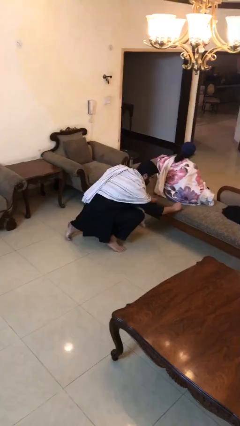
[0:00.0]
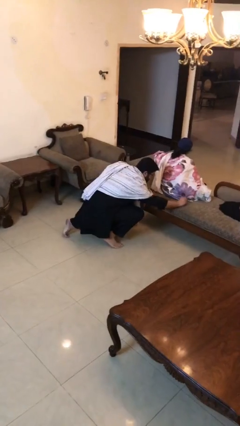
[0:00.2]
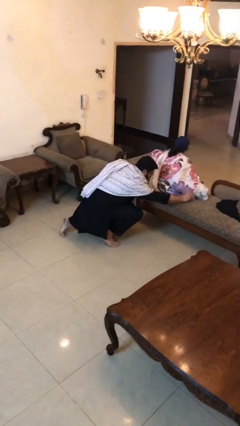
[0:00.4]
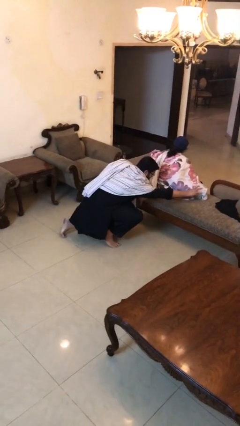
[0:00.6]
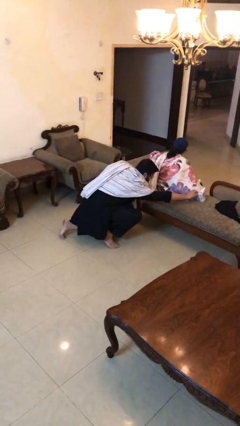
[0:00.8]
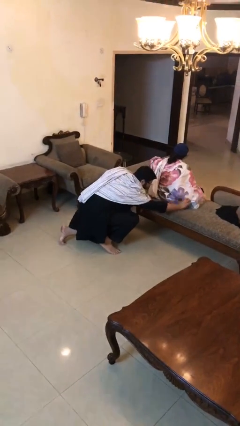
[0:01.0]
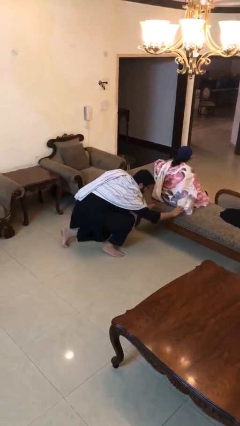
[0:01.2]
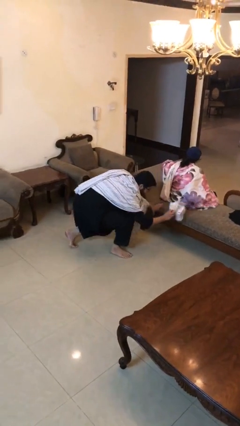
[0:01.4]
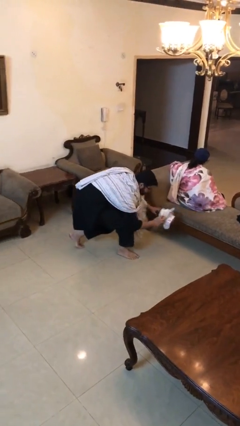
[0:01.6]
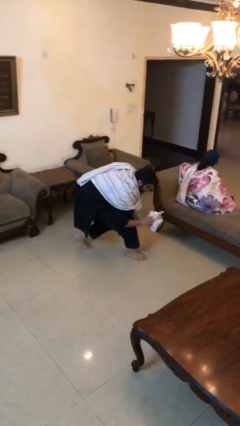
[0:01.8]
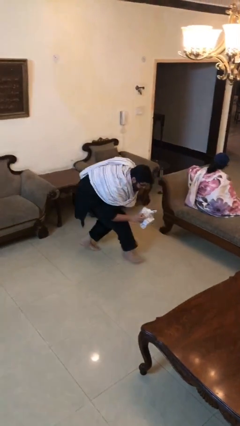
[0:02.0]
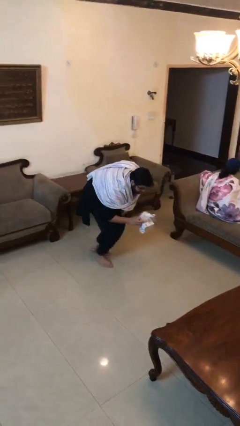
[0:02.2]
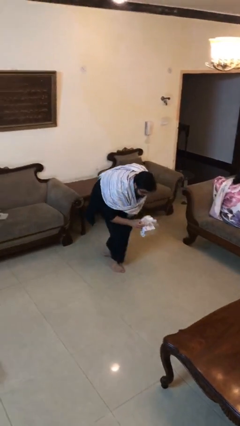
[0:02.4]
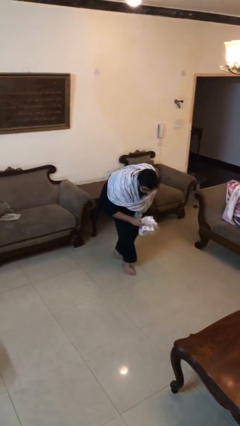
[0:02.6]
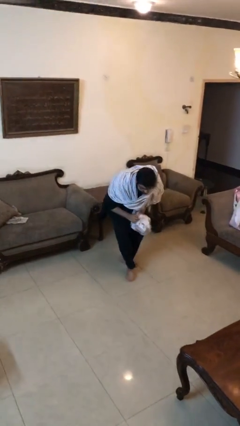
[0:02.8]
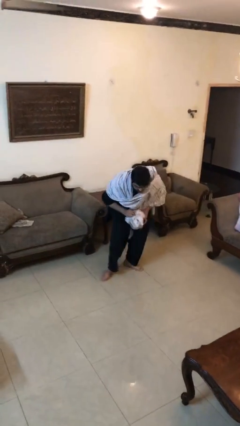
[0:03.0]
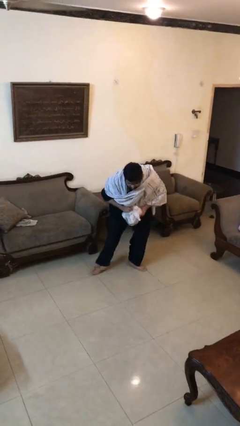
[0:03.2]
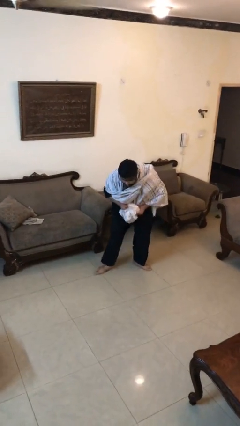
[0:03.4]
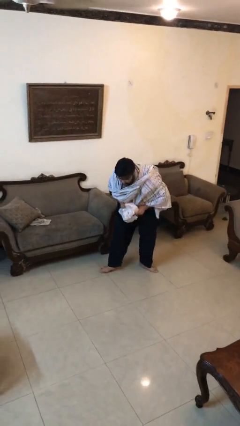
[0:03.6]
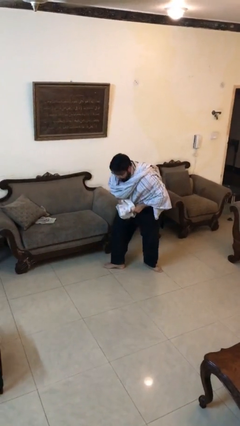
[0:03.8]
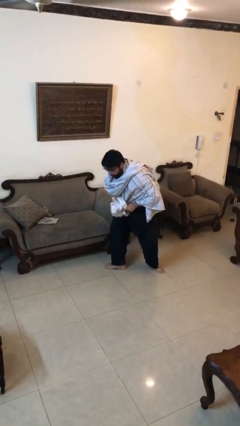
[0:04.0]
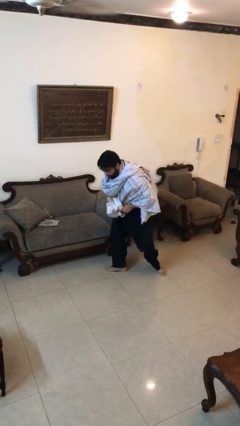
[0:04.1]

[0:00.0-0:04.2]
person steals object from person

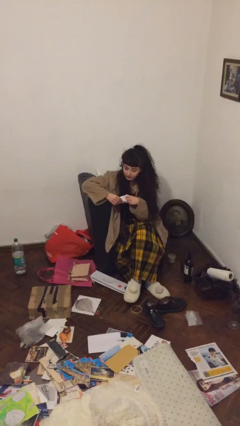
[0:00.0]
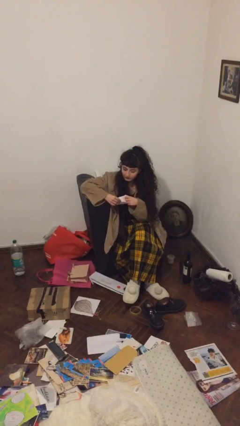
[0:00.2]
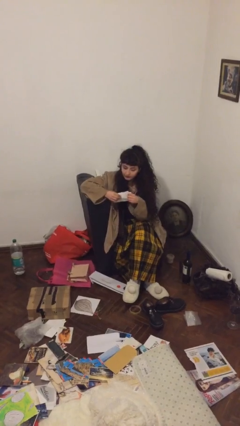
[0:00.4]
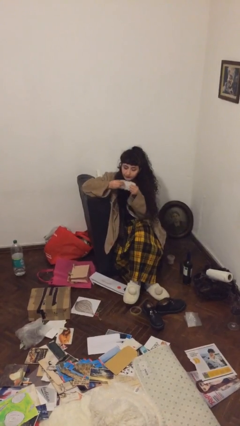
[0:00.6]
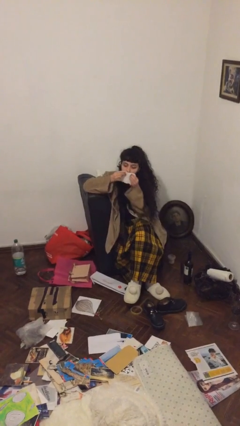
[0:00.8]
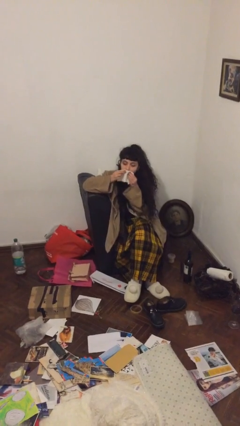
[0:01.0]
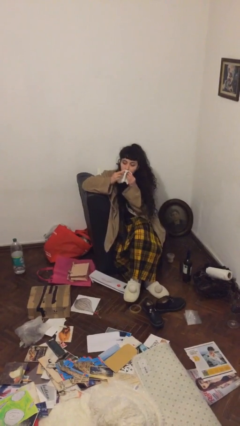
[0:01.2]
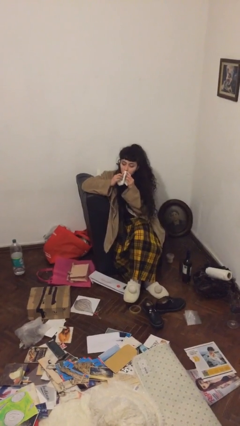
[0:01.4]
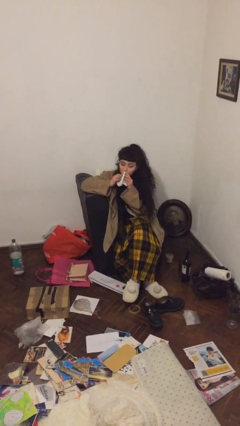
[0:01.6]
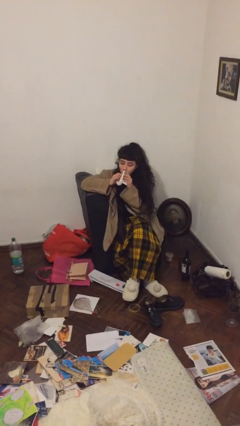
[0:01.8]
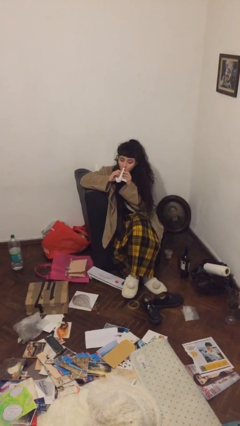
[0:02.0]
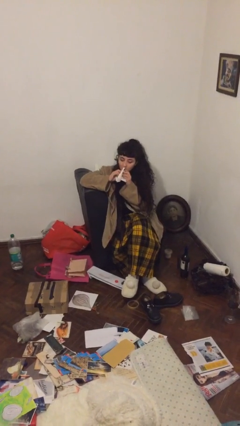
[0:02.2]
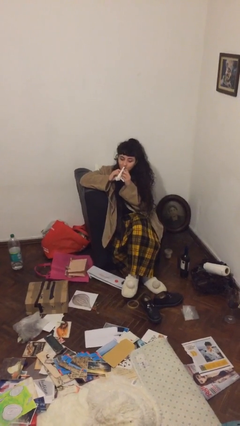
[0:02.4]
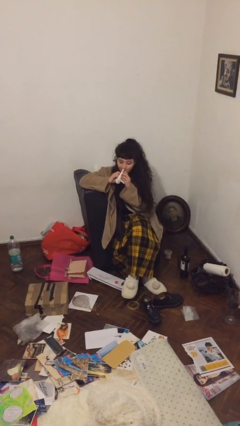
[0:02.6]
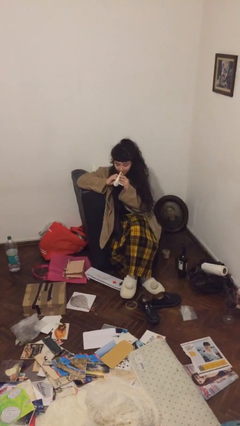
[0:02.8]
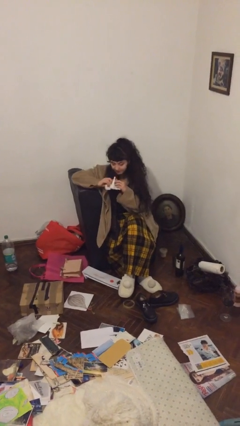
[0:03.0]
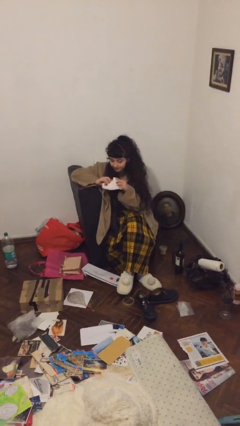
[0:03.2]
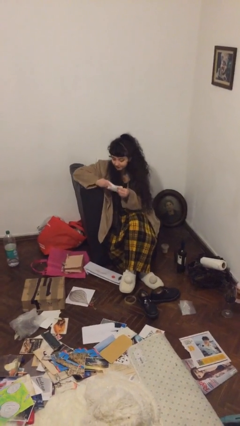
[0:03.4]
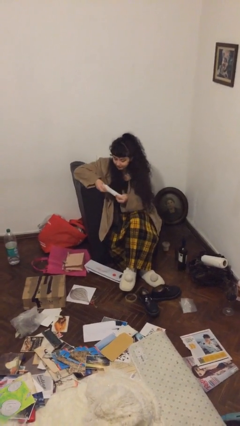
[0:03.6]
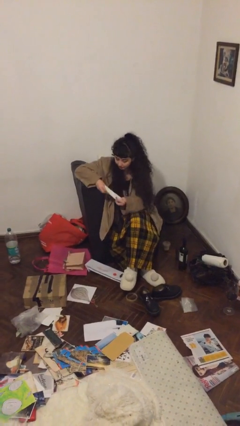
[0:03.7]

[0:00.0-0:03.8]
person wipes mouth with napkin

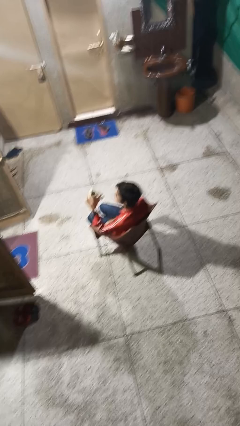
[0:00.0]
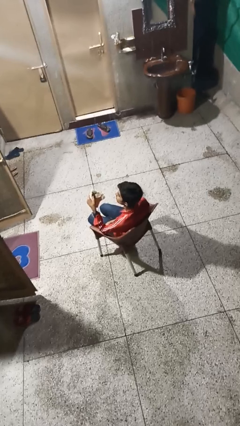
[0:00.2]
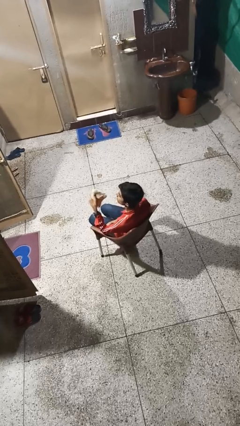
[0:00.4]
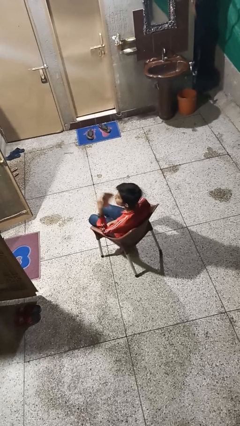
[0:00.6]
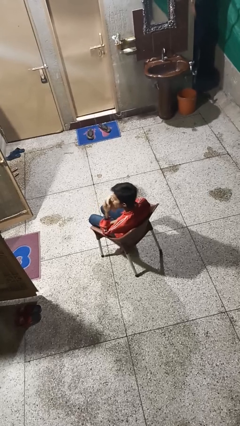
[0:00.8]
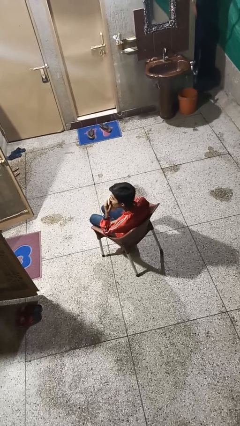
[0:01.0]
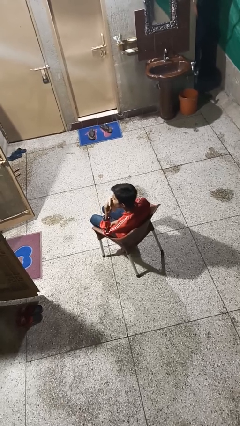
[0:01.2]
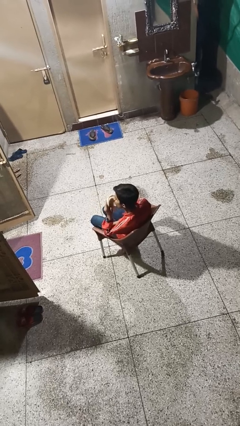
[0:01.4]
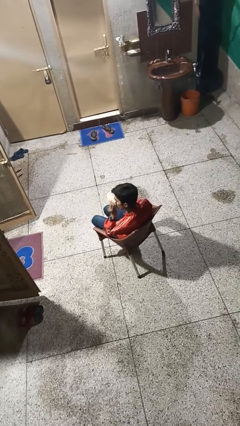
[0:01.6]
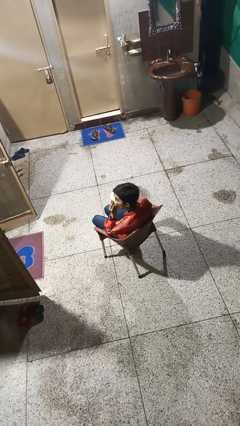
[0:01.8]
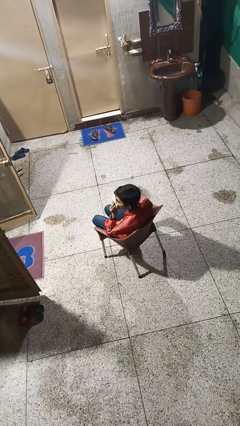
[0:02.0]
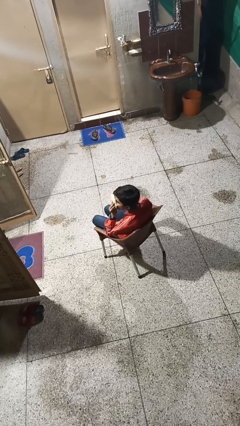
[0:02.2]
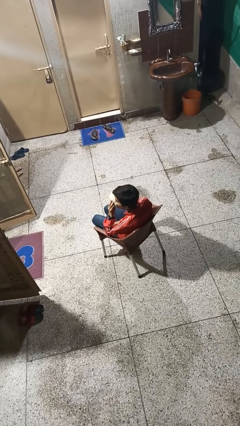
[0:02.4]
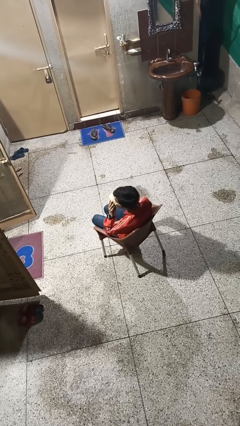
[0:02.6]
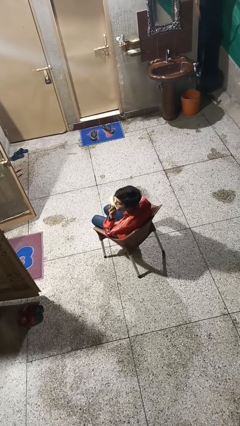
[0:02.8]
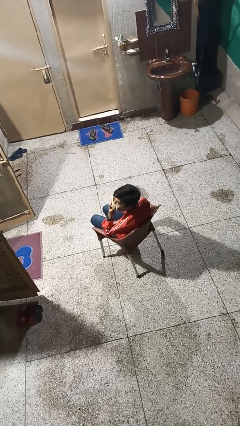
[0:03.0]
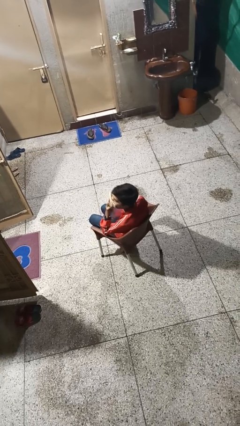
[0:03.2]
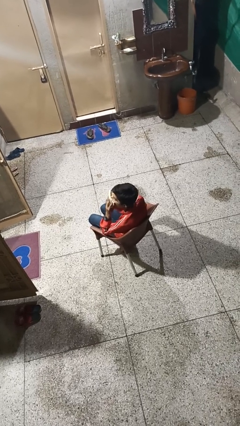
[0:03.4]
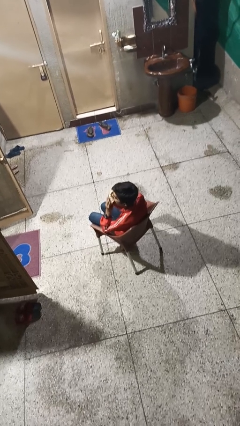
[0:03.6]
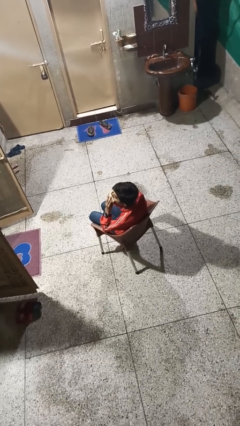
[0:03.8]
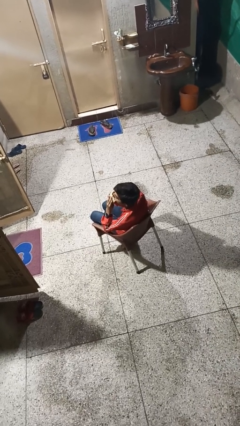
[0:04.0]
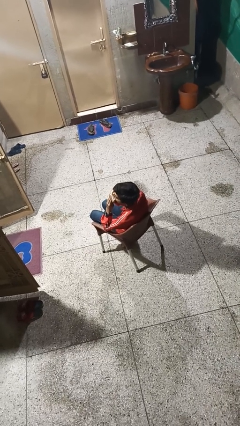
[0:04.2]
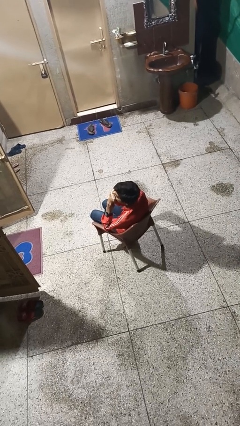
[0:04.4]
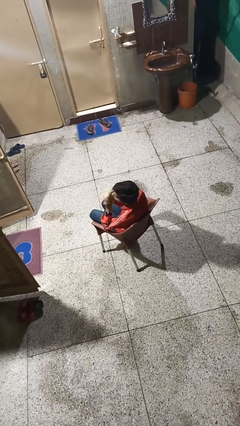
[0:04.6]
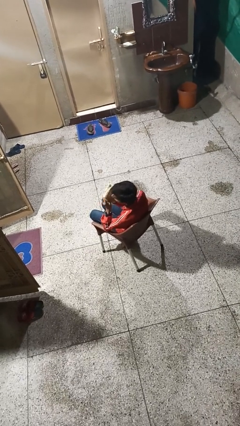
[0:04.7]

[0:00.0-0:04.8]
person blows nose

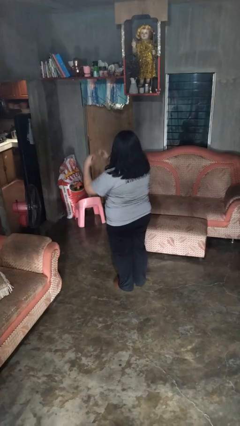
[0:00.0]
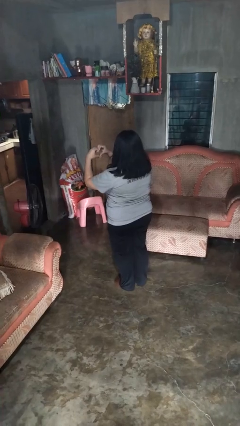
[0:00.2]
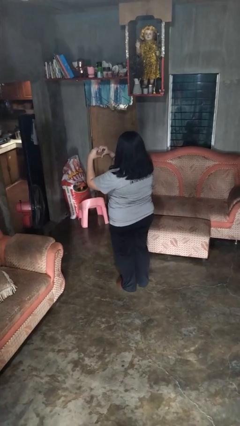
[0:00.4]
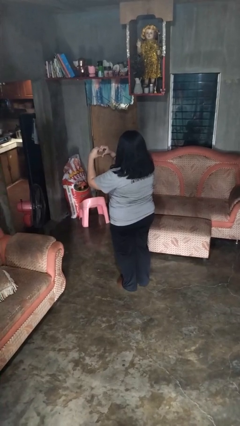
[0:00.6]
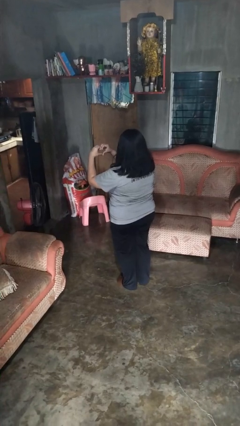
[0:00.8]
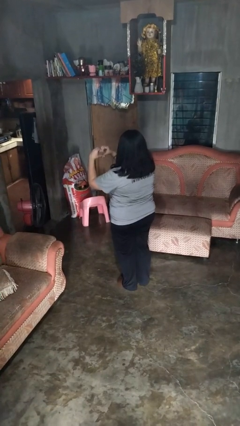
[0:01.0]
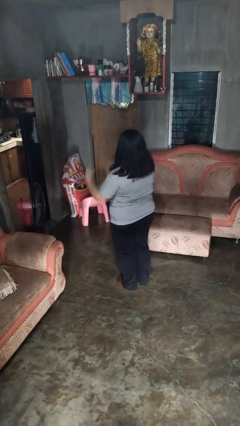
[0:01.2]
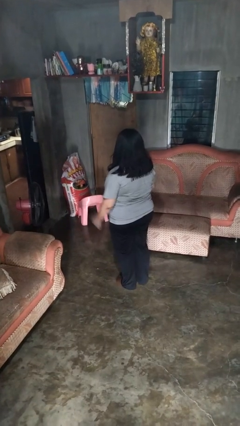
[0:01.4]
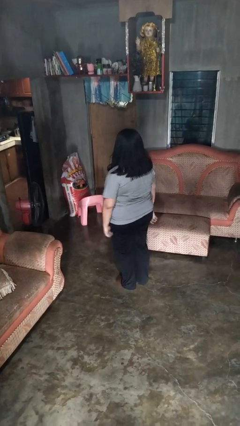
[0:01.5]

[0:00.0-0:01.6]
person gestures heart

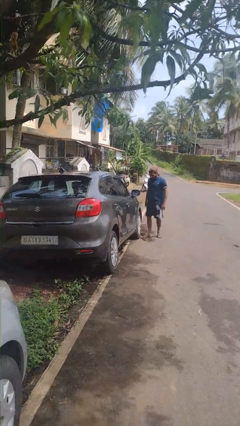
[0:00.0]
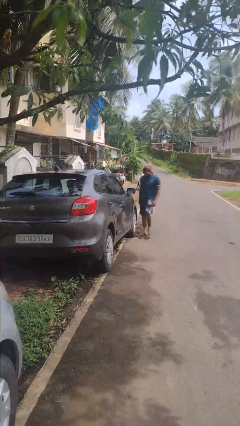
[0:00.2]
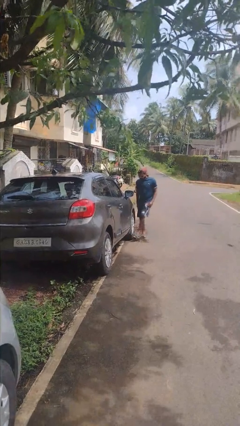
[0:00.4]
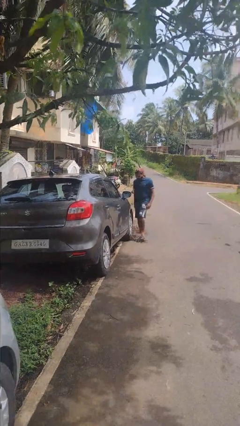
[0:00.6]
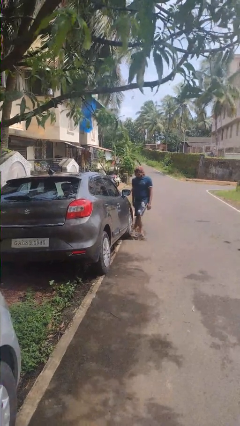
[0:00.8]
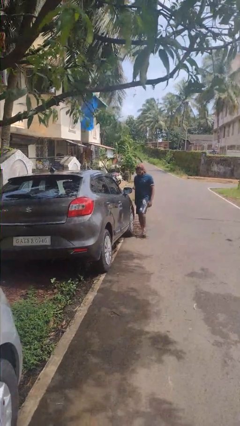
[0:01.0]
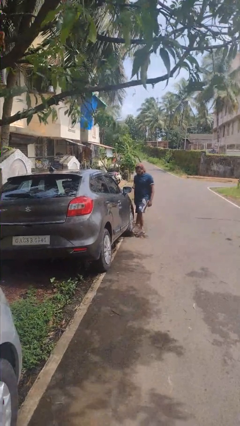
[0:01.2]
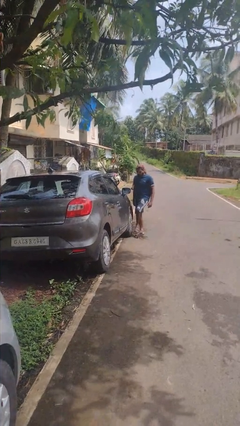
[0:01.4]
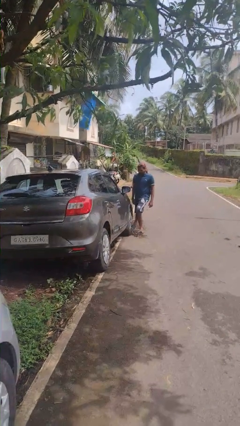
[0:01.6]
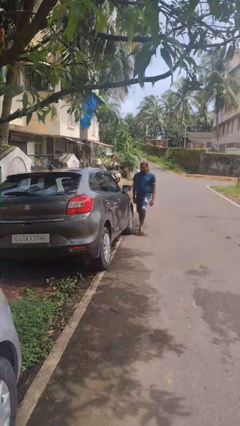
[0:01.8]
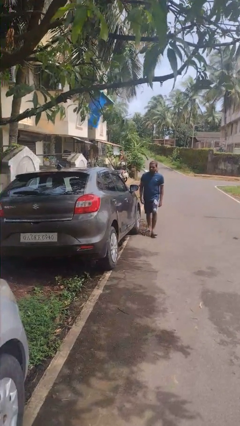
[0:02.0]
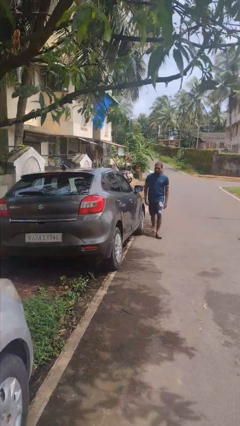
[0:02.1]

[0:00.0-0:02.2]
person kicks car tires

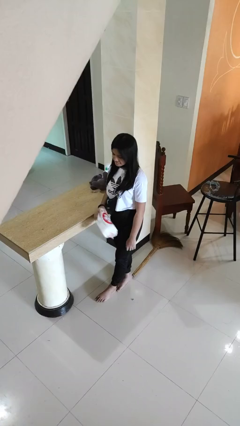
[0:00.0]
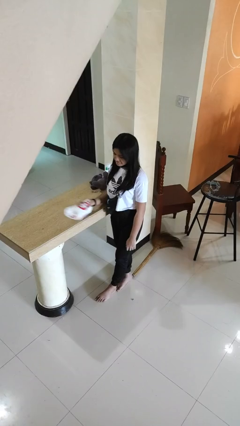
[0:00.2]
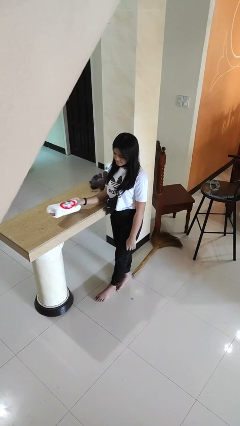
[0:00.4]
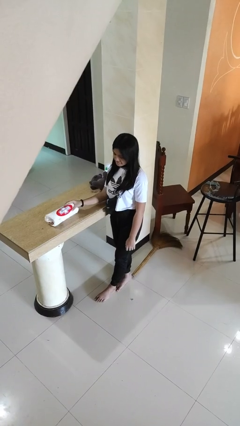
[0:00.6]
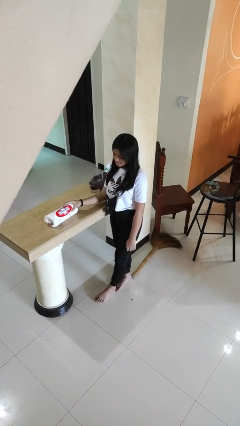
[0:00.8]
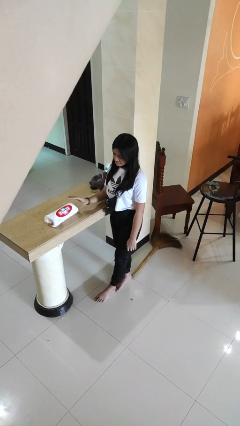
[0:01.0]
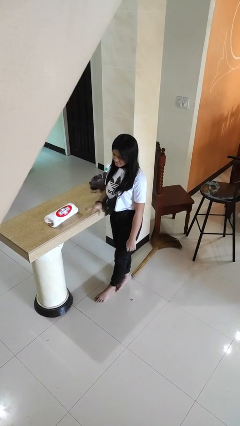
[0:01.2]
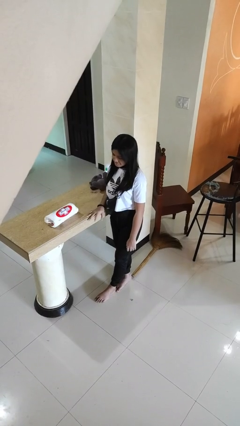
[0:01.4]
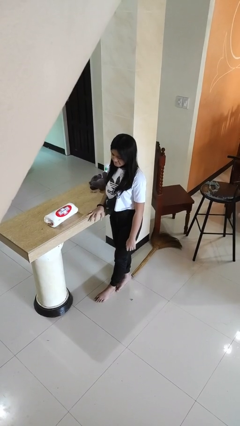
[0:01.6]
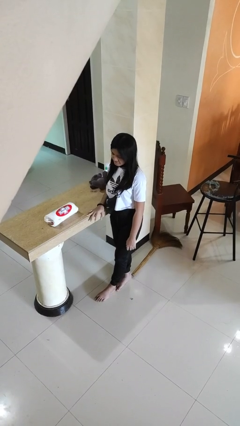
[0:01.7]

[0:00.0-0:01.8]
person puts down object on countertop
